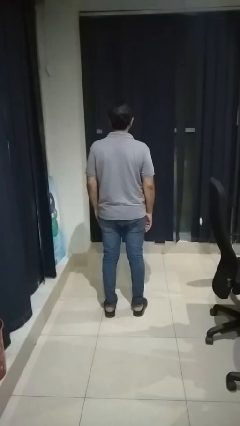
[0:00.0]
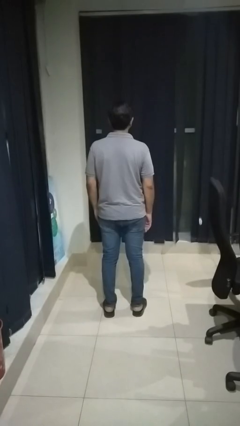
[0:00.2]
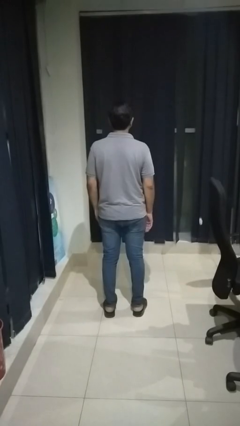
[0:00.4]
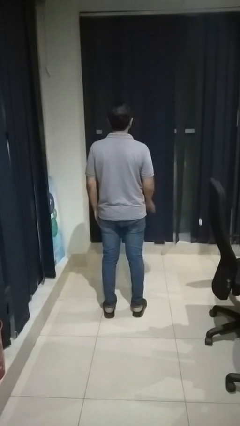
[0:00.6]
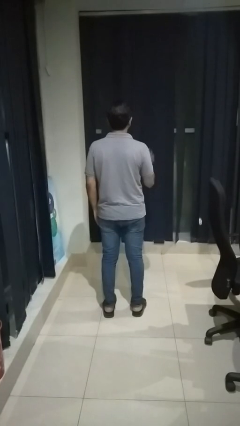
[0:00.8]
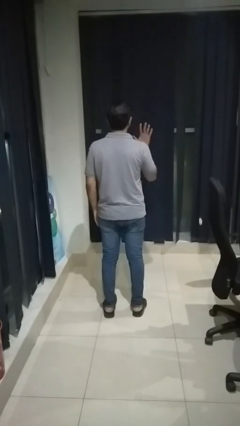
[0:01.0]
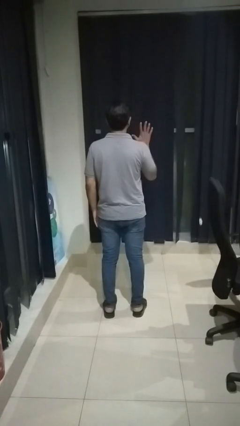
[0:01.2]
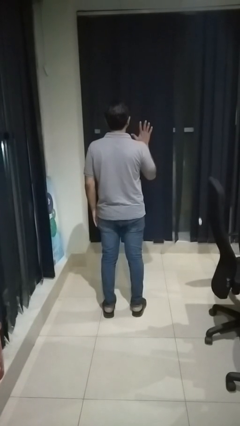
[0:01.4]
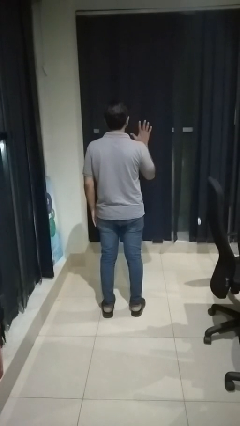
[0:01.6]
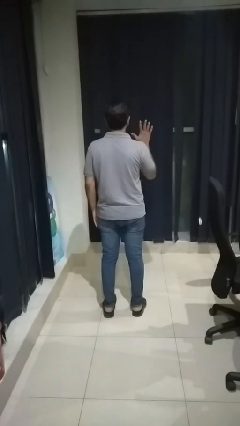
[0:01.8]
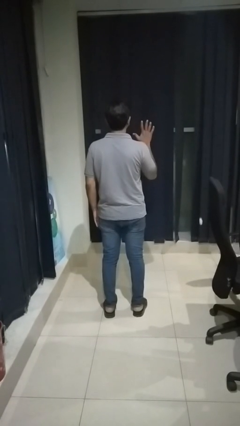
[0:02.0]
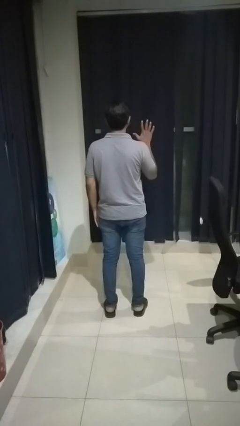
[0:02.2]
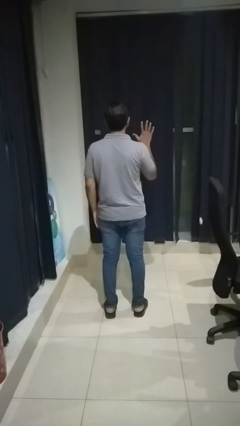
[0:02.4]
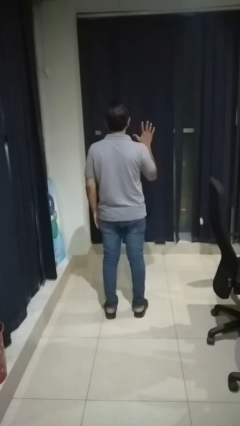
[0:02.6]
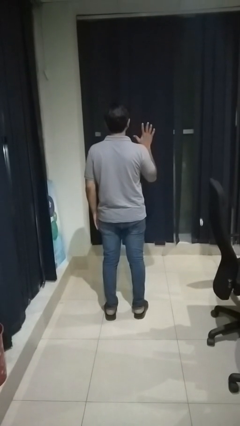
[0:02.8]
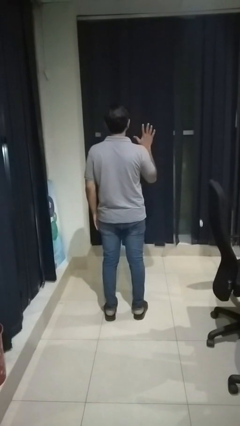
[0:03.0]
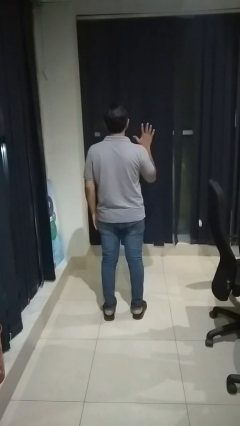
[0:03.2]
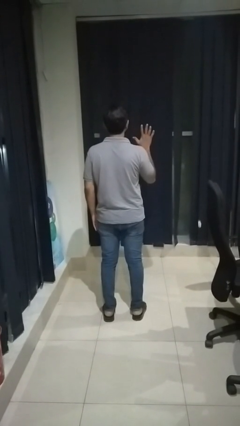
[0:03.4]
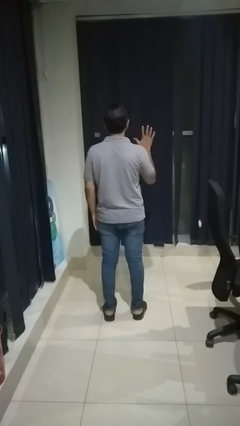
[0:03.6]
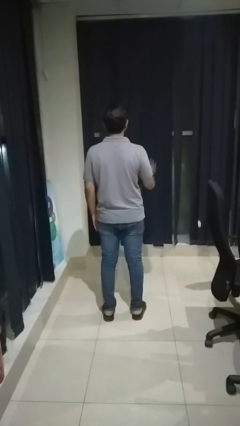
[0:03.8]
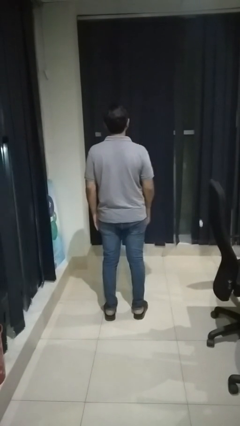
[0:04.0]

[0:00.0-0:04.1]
person gestures number five

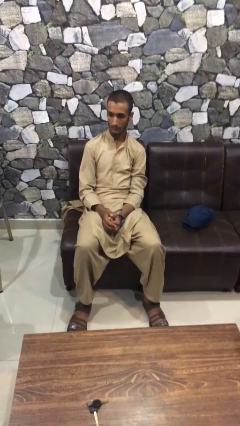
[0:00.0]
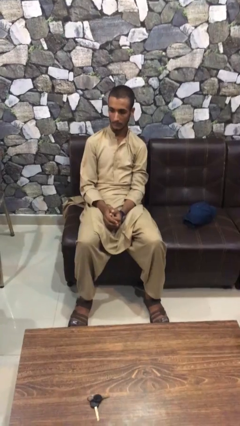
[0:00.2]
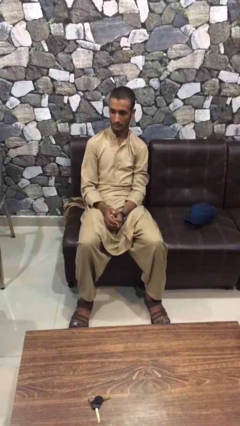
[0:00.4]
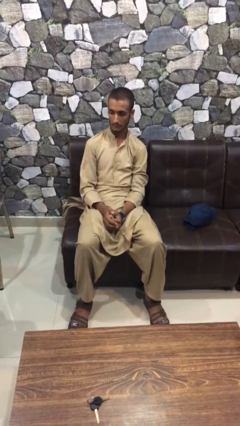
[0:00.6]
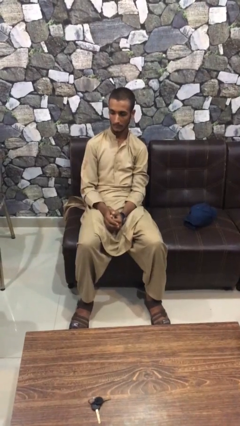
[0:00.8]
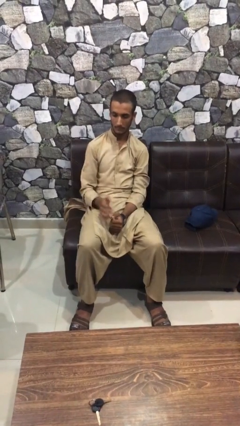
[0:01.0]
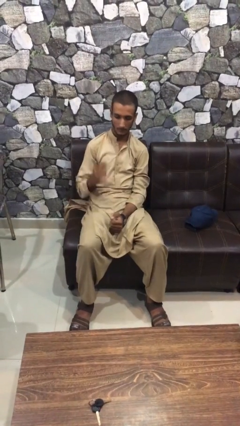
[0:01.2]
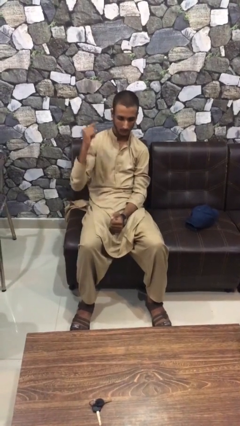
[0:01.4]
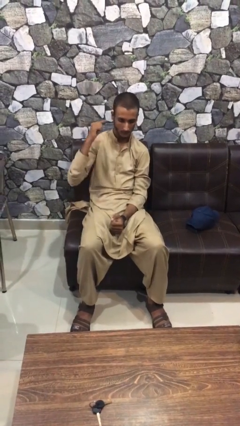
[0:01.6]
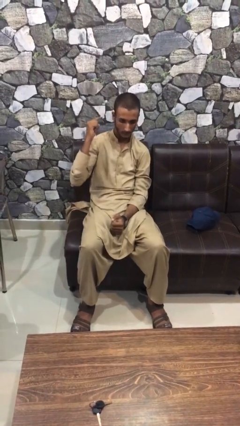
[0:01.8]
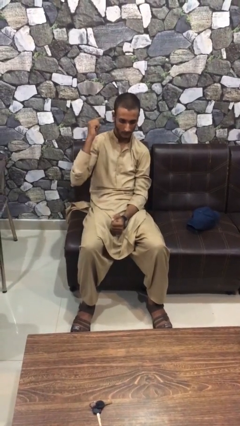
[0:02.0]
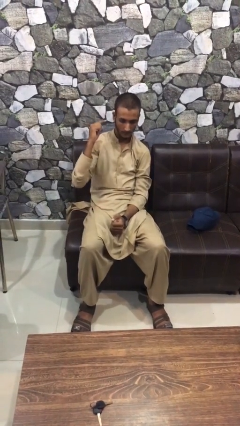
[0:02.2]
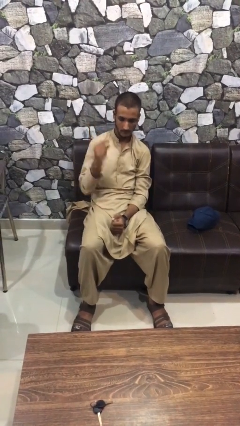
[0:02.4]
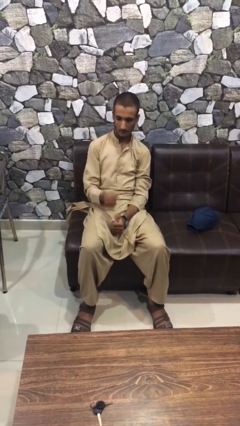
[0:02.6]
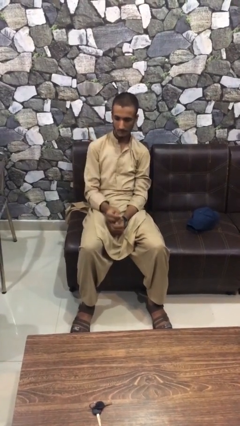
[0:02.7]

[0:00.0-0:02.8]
person gestures listen closely

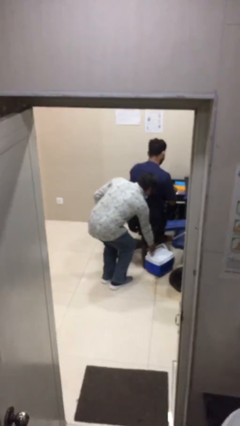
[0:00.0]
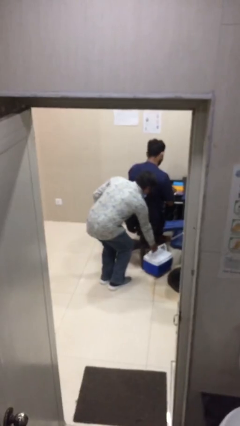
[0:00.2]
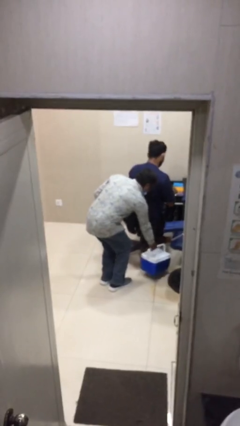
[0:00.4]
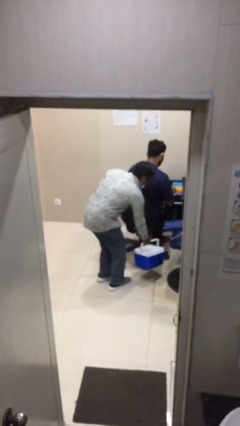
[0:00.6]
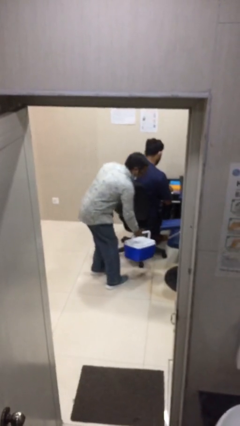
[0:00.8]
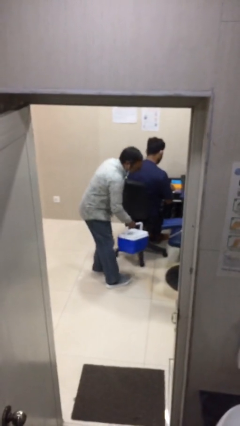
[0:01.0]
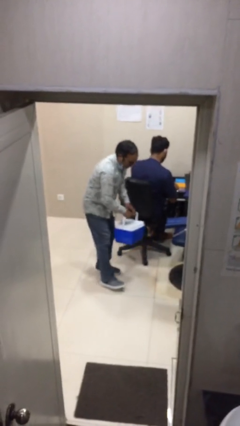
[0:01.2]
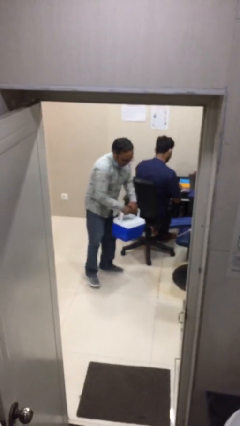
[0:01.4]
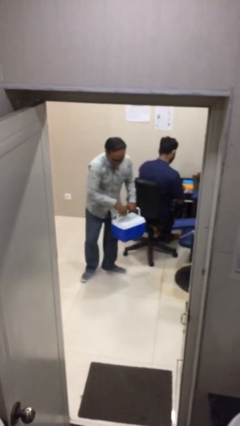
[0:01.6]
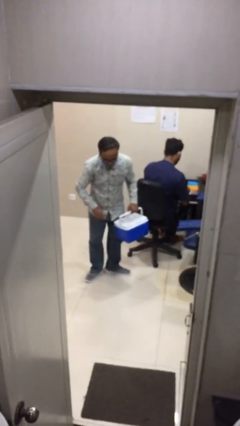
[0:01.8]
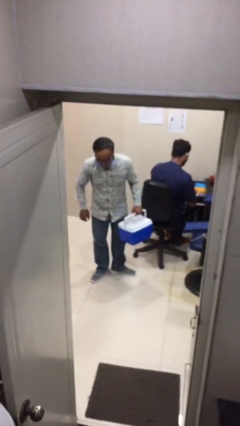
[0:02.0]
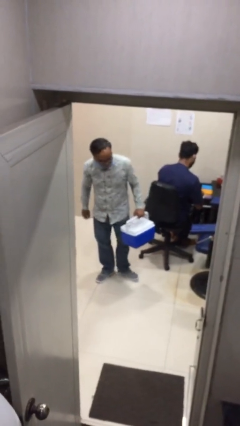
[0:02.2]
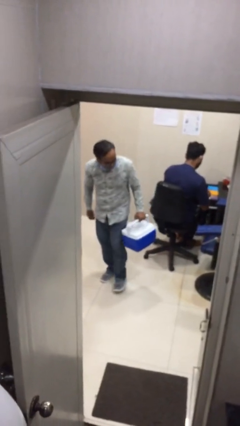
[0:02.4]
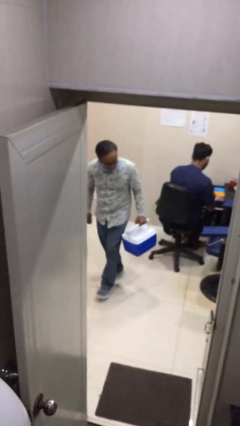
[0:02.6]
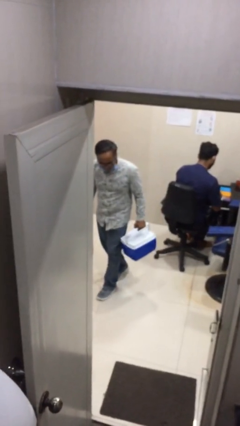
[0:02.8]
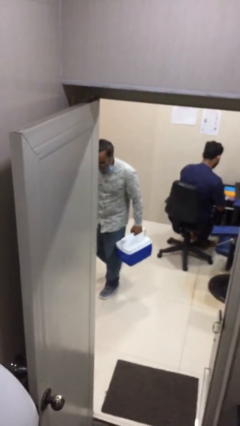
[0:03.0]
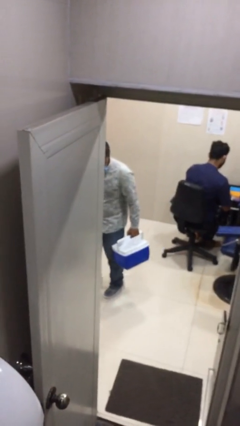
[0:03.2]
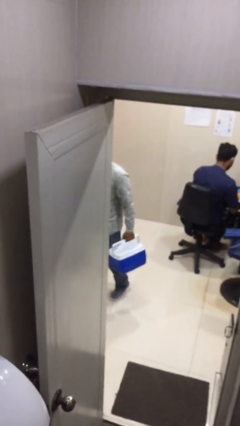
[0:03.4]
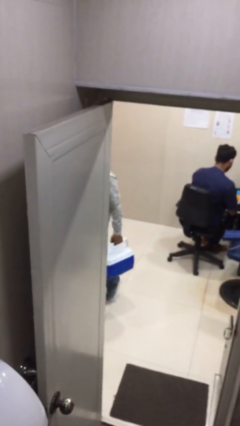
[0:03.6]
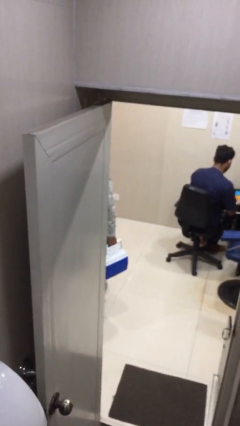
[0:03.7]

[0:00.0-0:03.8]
person steals object from person

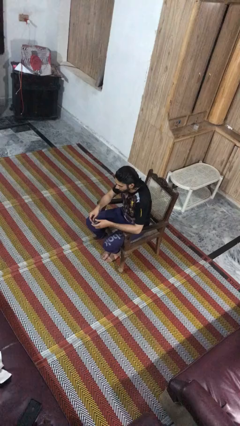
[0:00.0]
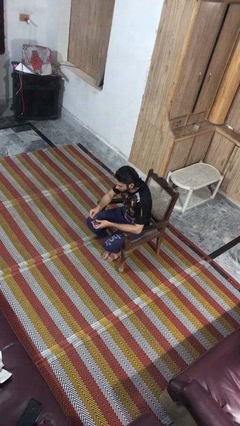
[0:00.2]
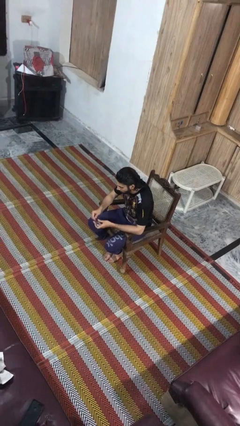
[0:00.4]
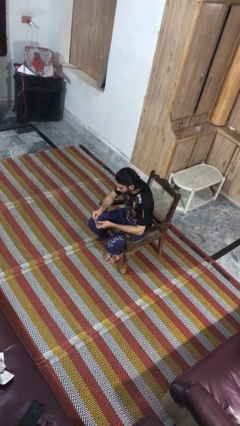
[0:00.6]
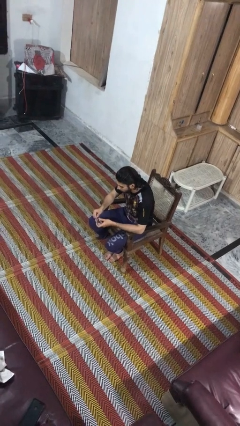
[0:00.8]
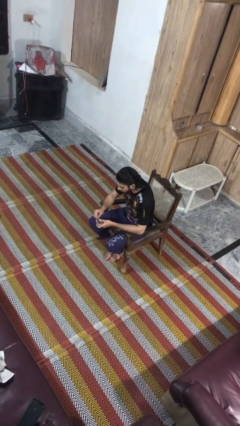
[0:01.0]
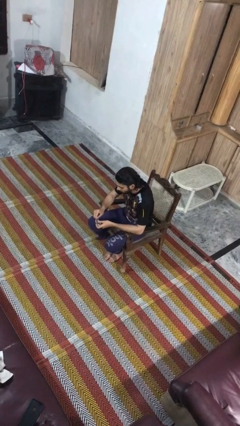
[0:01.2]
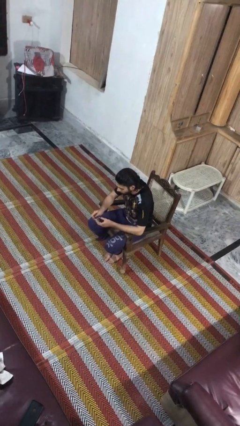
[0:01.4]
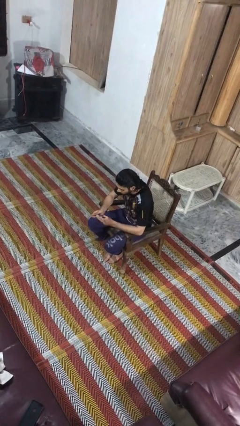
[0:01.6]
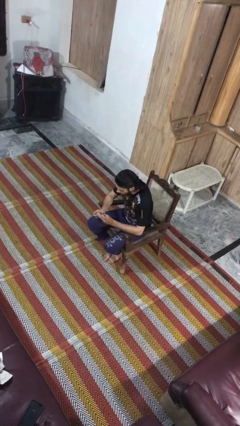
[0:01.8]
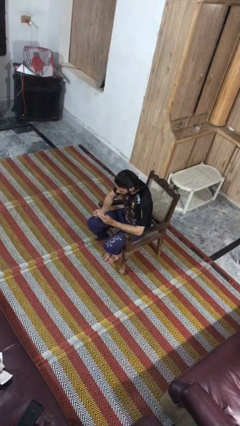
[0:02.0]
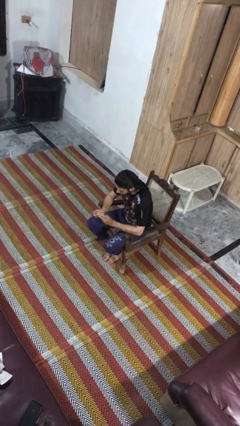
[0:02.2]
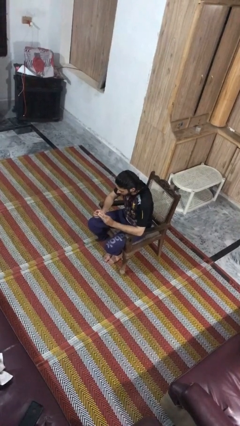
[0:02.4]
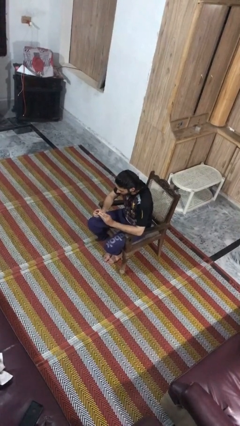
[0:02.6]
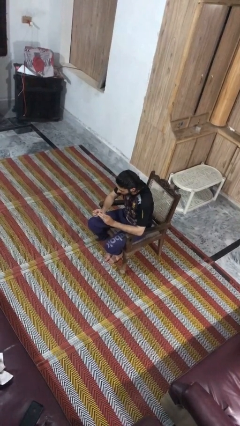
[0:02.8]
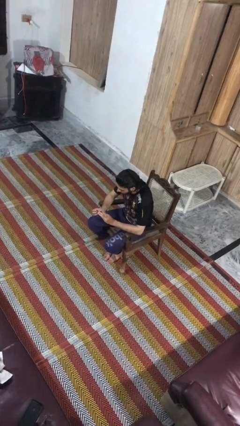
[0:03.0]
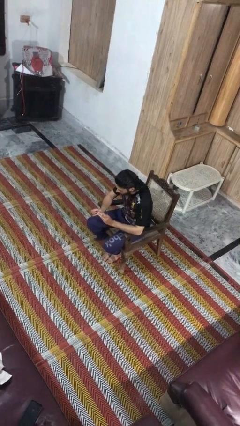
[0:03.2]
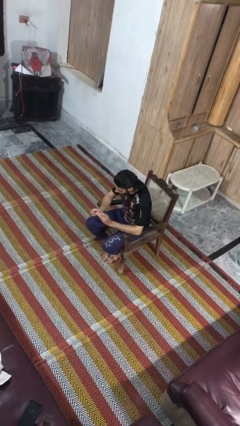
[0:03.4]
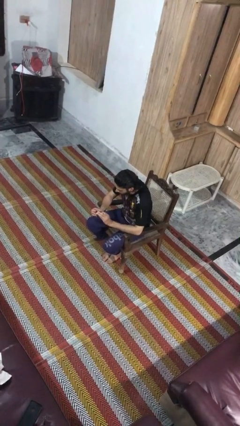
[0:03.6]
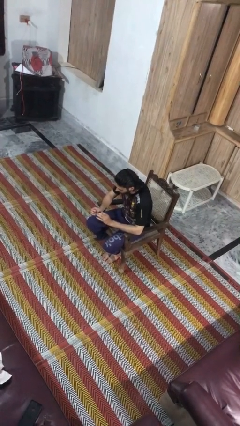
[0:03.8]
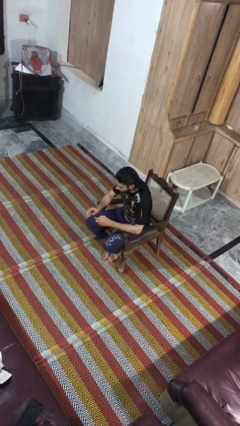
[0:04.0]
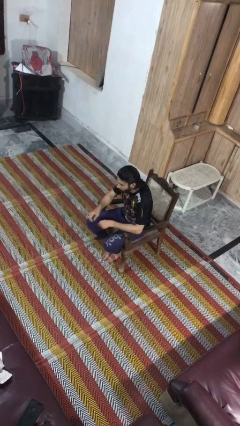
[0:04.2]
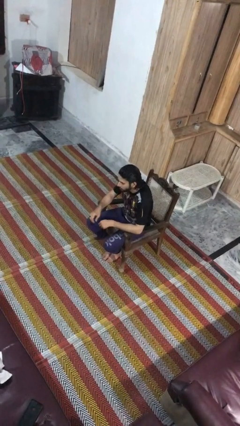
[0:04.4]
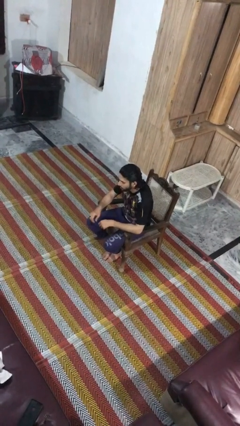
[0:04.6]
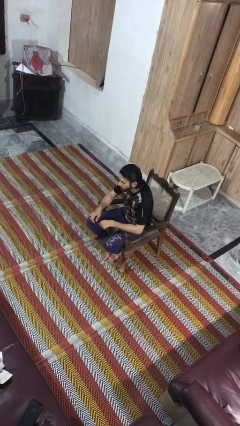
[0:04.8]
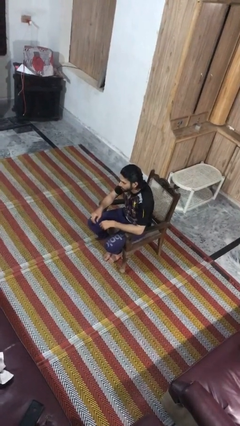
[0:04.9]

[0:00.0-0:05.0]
person clips fingernails

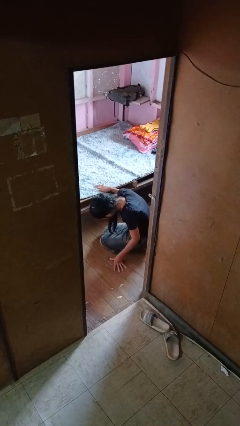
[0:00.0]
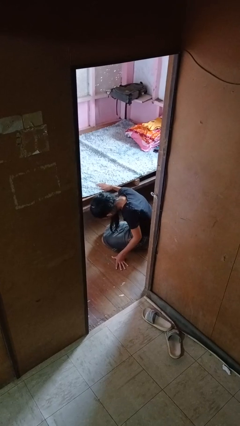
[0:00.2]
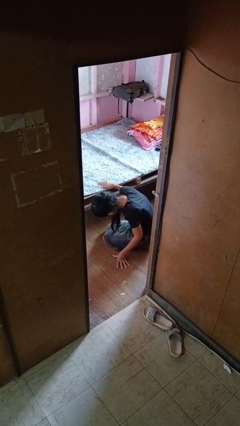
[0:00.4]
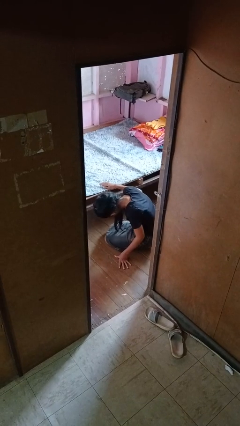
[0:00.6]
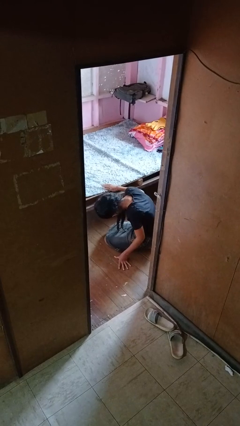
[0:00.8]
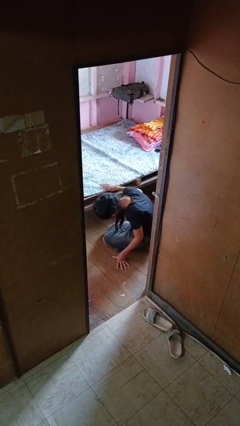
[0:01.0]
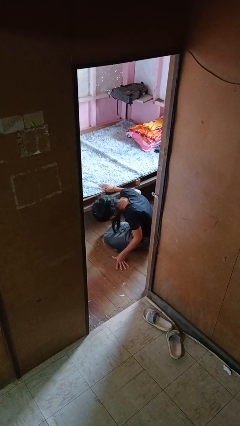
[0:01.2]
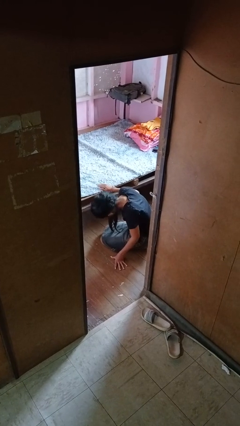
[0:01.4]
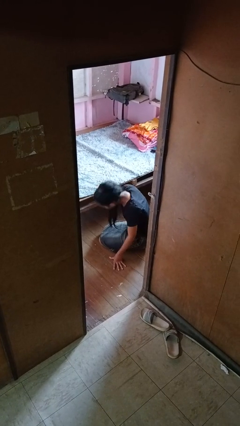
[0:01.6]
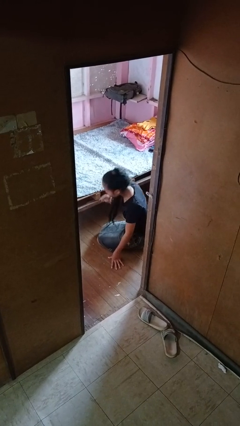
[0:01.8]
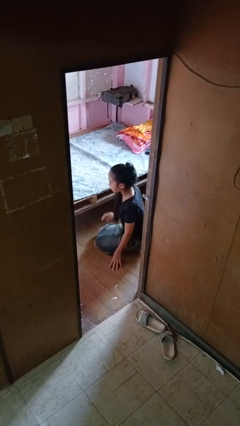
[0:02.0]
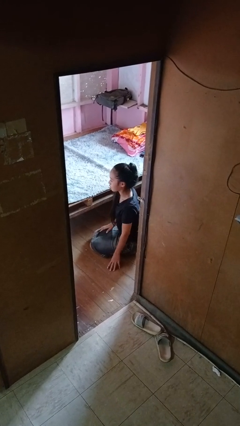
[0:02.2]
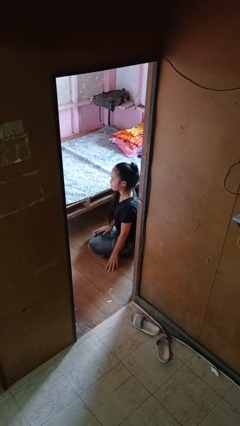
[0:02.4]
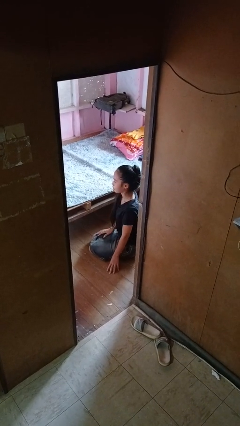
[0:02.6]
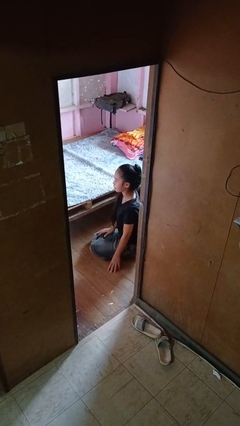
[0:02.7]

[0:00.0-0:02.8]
person searches under bed
